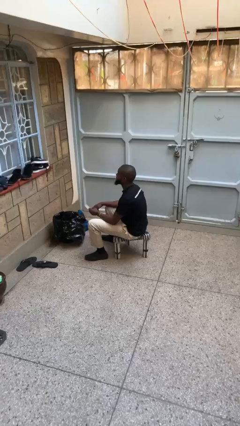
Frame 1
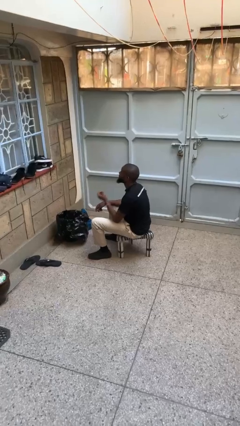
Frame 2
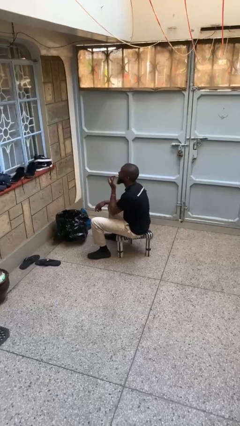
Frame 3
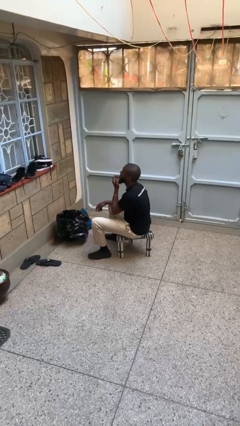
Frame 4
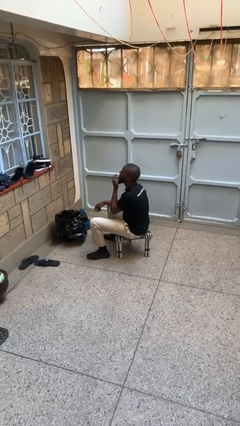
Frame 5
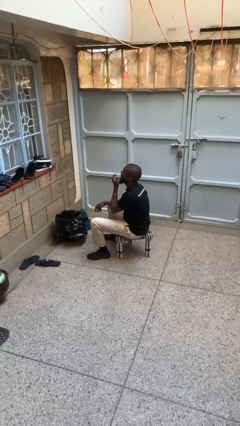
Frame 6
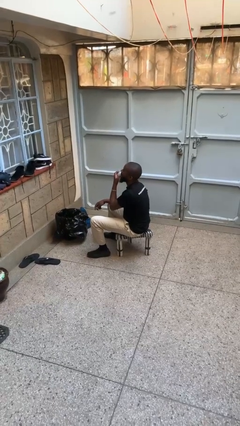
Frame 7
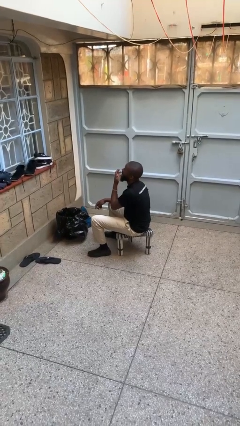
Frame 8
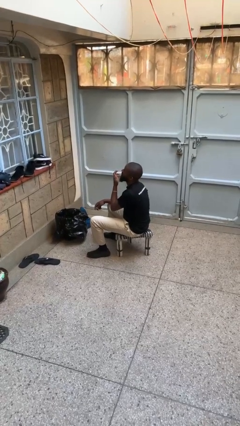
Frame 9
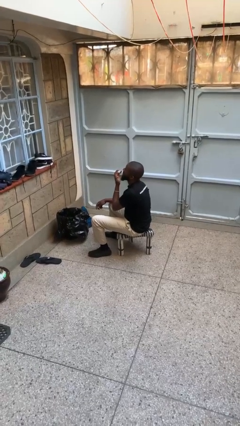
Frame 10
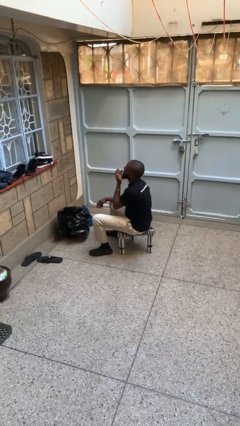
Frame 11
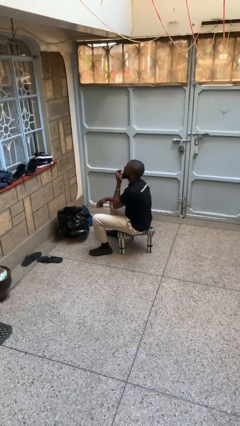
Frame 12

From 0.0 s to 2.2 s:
person licks fingers

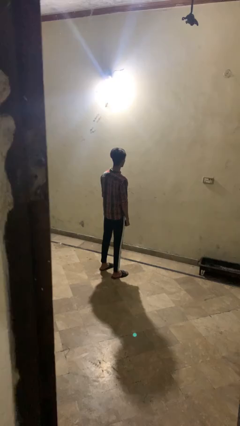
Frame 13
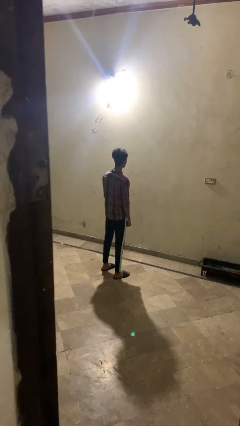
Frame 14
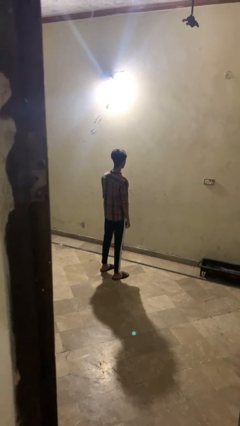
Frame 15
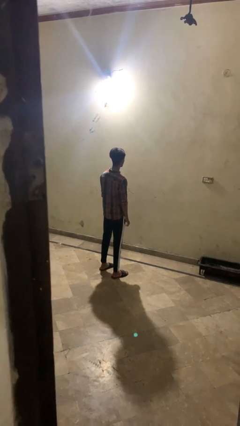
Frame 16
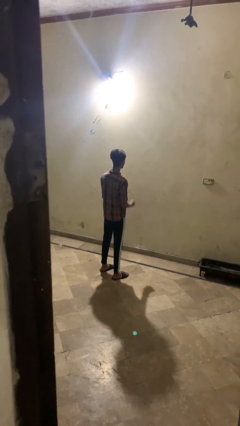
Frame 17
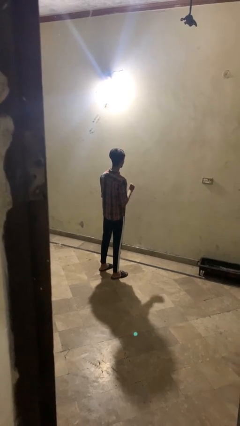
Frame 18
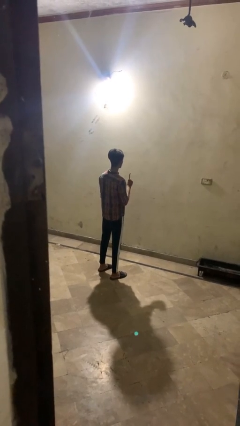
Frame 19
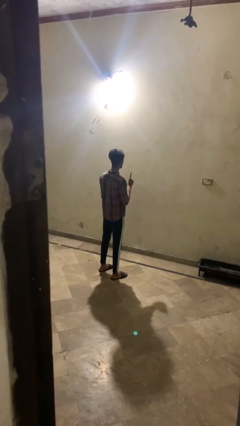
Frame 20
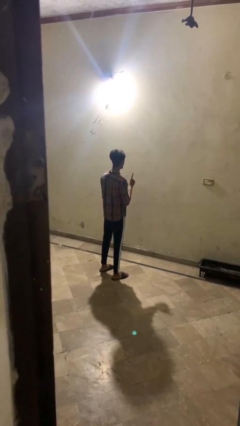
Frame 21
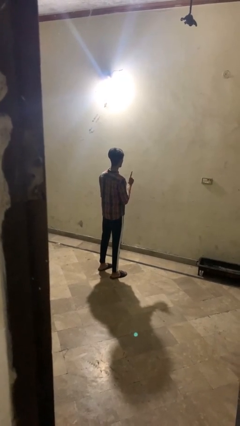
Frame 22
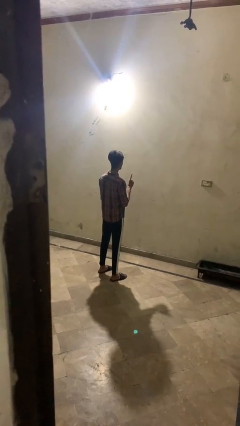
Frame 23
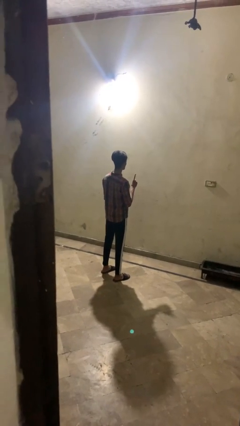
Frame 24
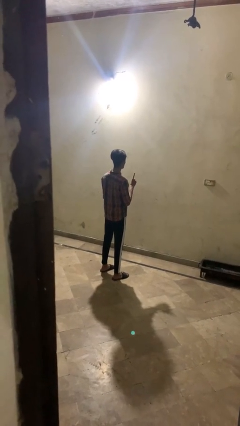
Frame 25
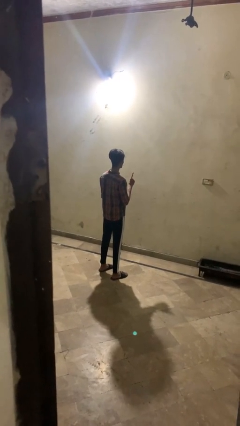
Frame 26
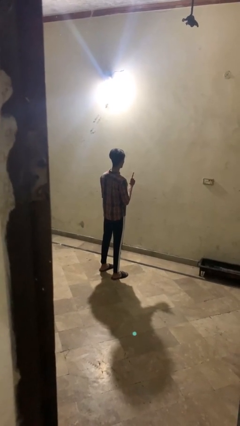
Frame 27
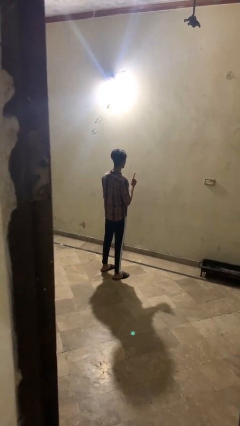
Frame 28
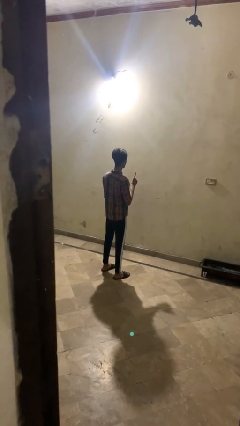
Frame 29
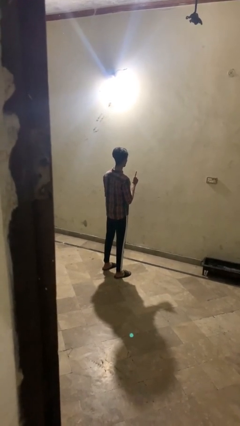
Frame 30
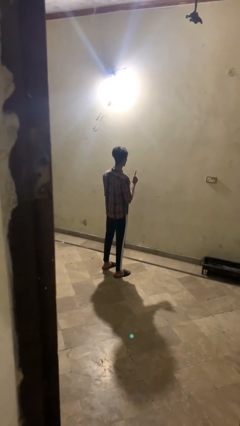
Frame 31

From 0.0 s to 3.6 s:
person gestures number one

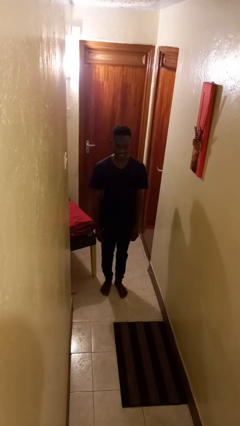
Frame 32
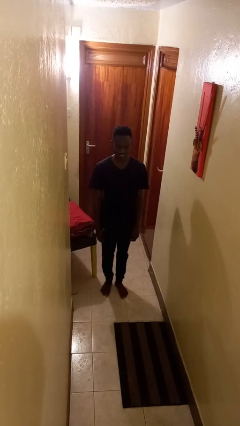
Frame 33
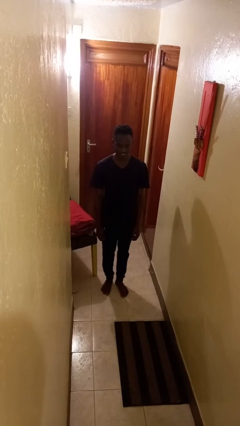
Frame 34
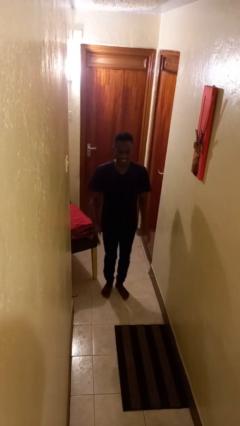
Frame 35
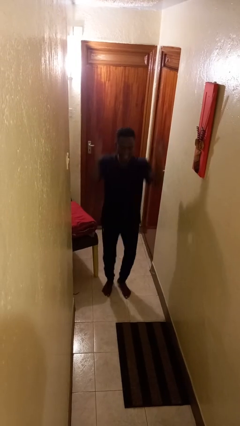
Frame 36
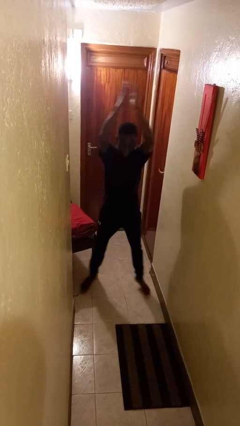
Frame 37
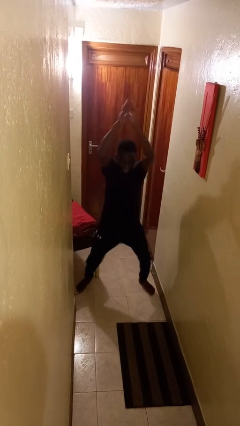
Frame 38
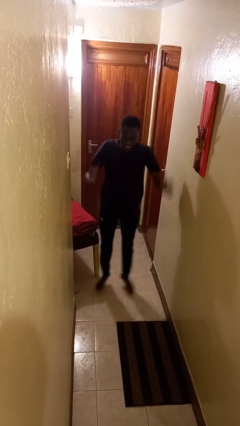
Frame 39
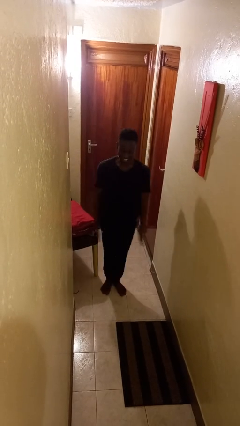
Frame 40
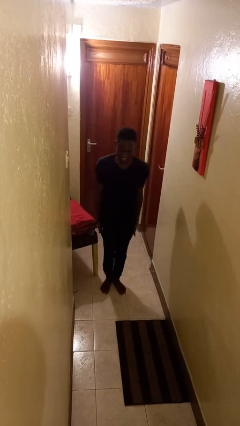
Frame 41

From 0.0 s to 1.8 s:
person exercises with jumping jacks

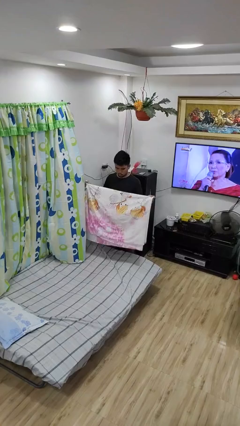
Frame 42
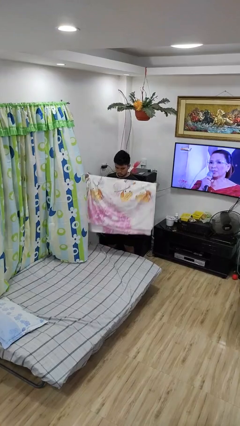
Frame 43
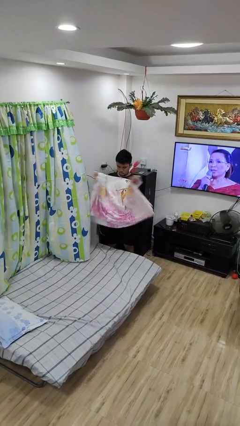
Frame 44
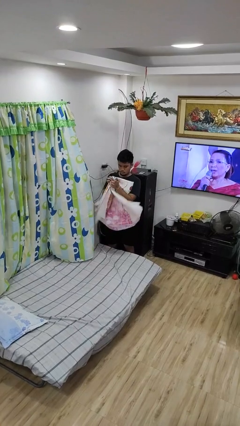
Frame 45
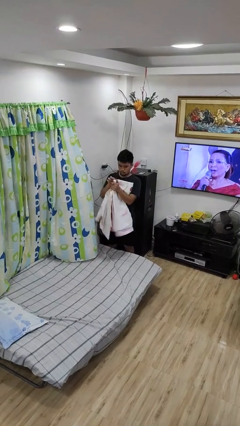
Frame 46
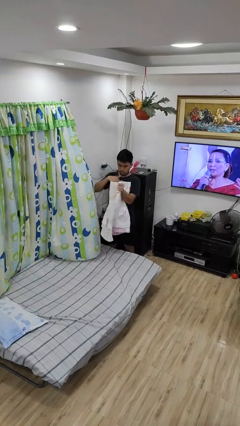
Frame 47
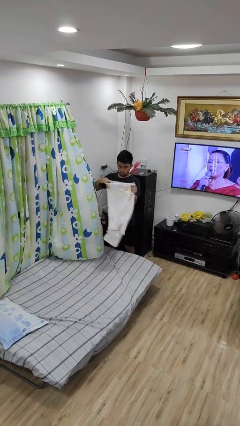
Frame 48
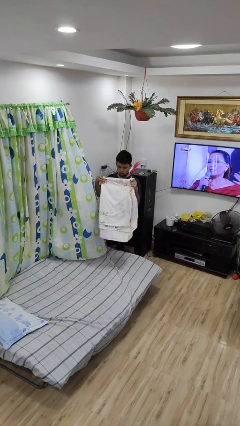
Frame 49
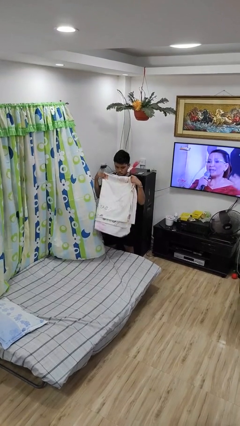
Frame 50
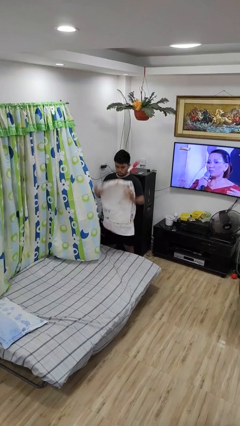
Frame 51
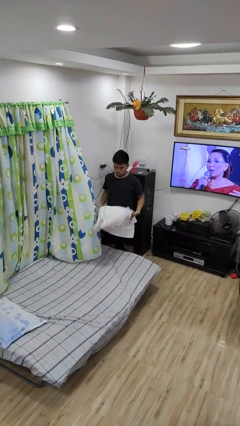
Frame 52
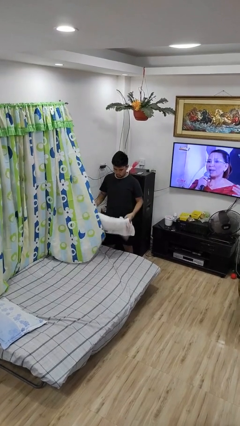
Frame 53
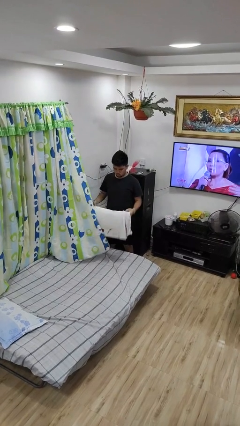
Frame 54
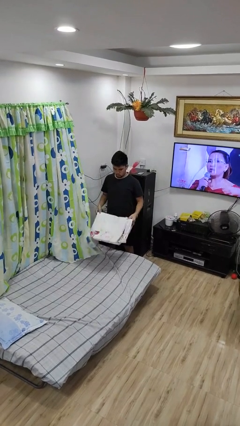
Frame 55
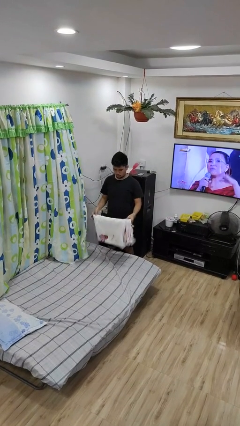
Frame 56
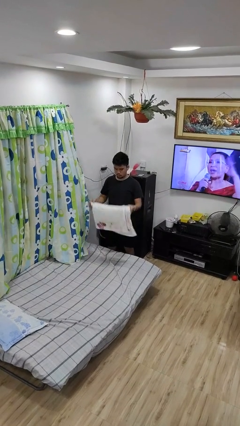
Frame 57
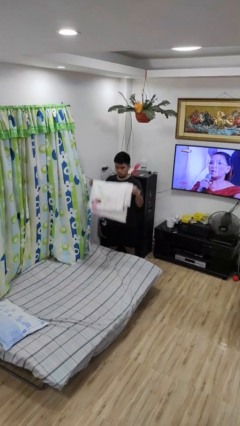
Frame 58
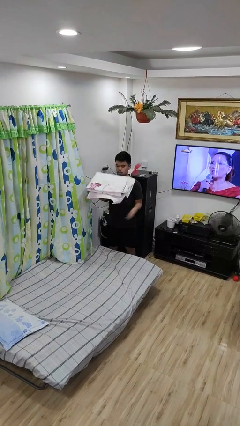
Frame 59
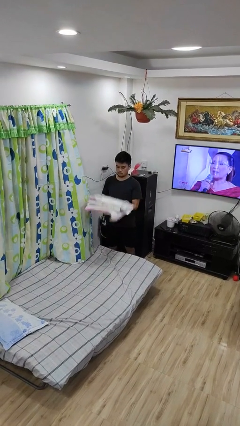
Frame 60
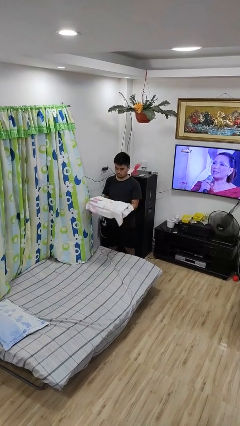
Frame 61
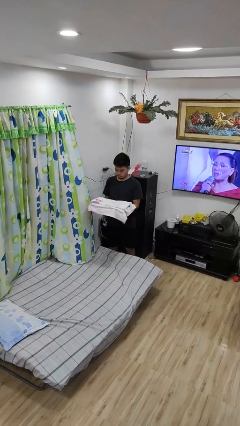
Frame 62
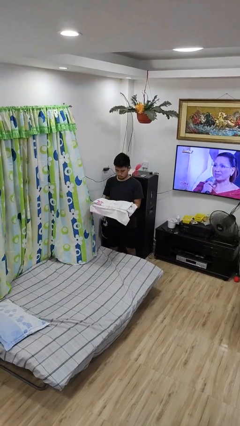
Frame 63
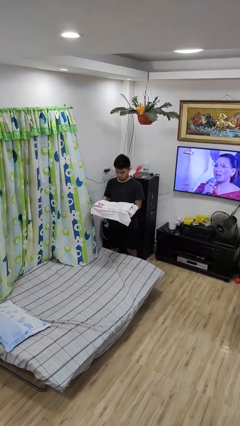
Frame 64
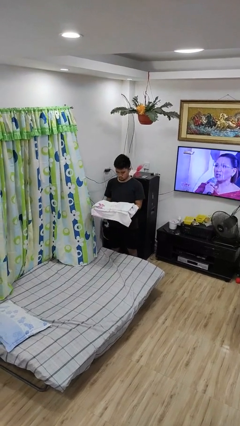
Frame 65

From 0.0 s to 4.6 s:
person folds blanket

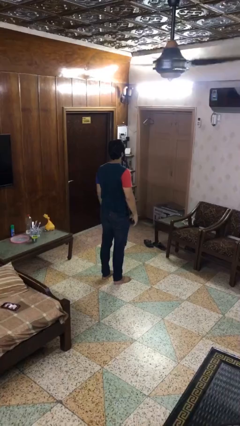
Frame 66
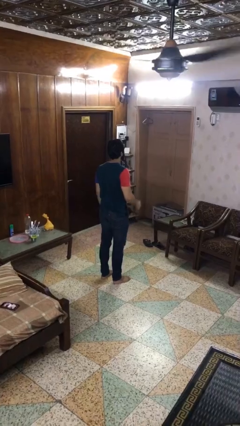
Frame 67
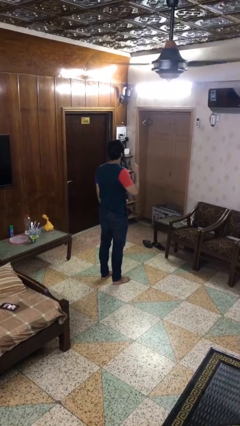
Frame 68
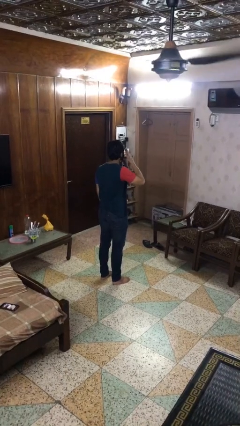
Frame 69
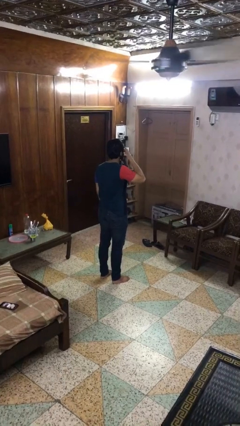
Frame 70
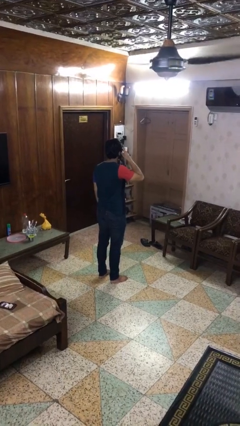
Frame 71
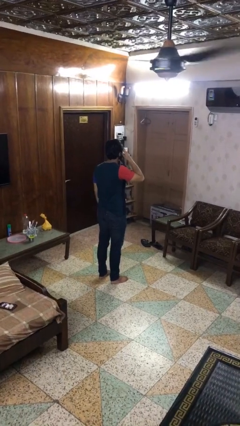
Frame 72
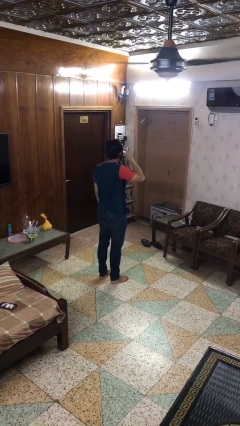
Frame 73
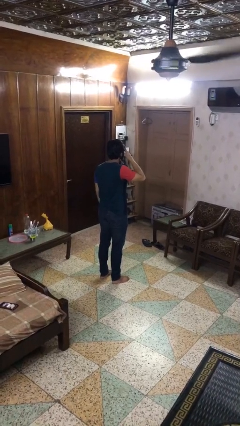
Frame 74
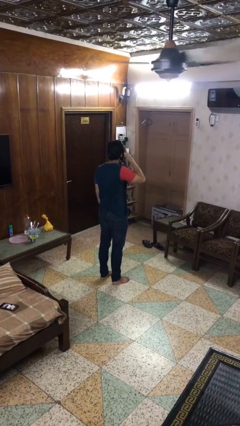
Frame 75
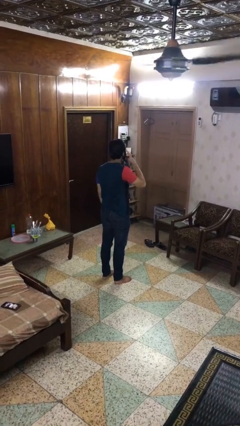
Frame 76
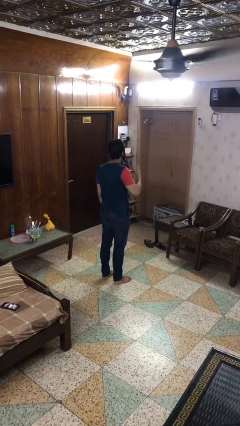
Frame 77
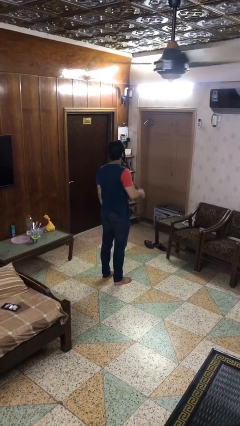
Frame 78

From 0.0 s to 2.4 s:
person rubs eyes

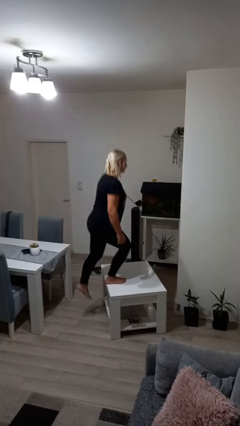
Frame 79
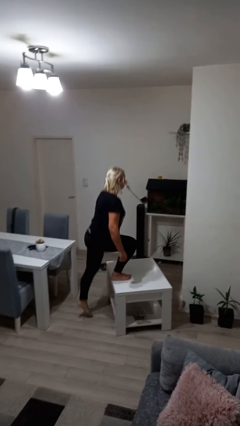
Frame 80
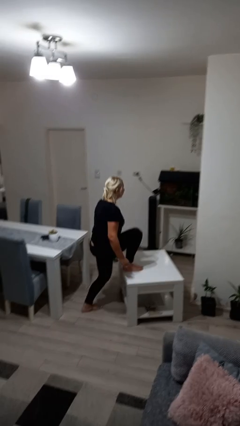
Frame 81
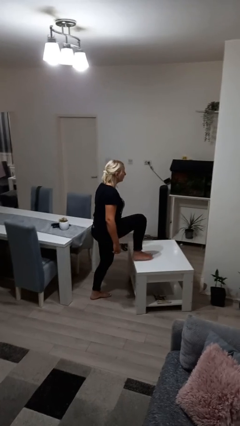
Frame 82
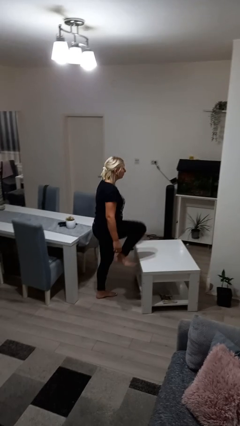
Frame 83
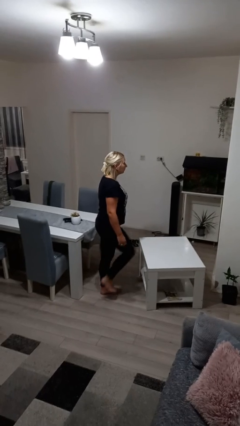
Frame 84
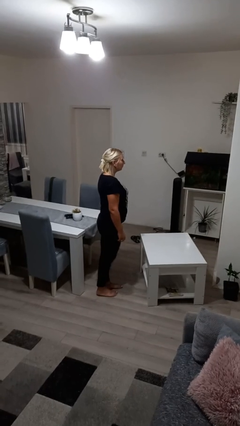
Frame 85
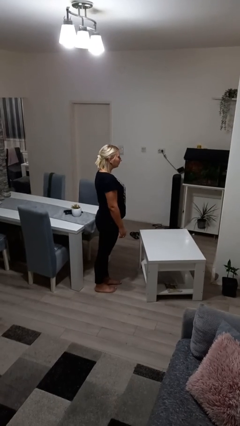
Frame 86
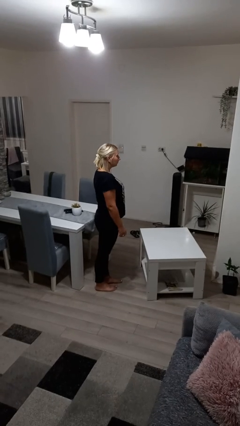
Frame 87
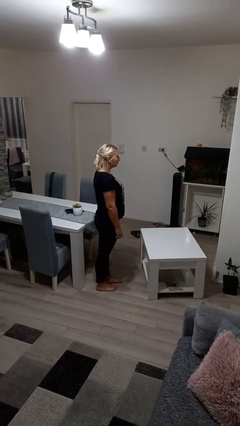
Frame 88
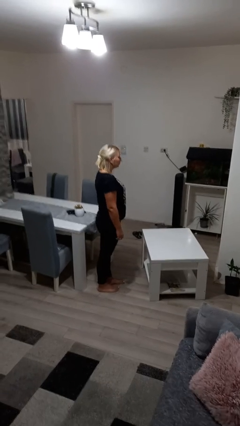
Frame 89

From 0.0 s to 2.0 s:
person climbs off table

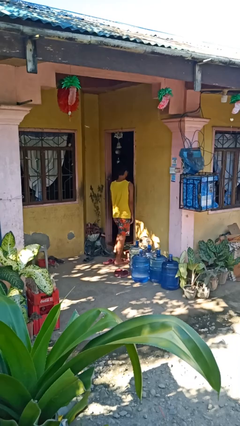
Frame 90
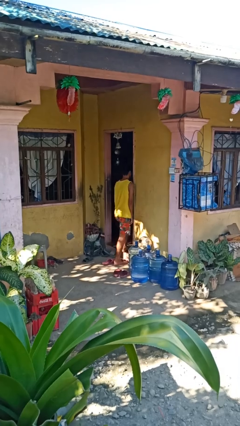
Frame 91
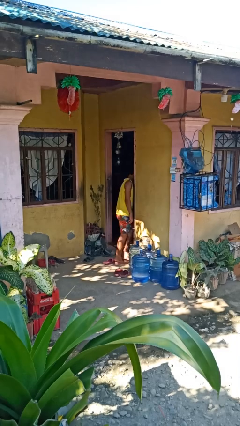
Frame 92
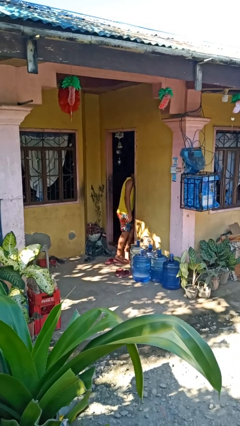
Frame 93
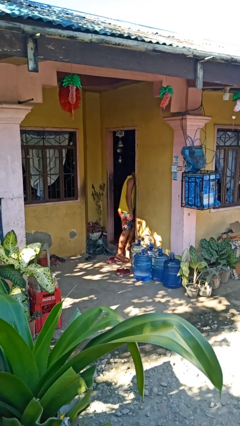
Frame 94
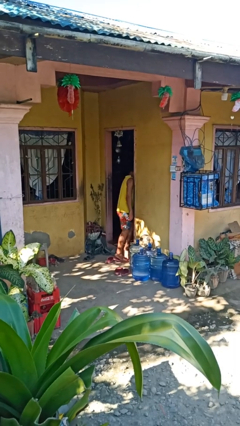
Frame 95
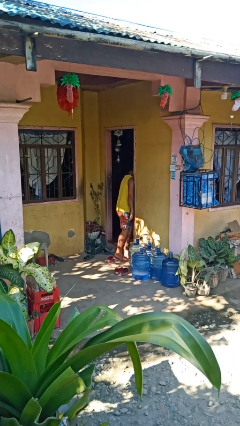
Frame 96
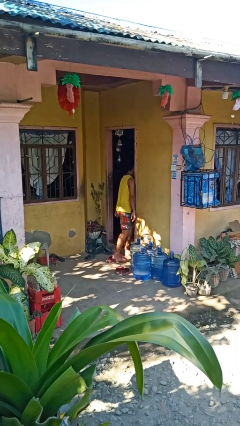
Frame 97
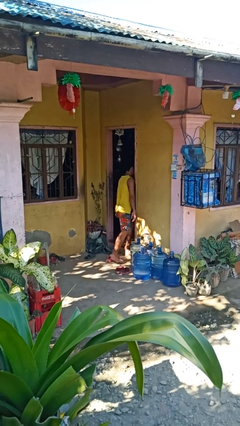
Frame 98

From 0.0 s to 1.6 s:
person bumps into wall
